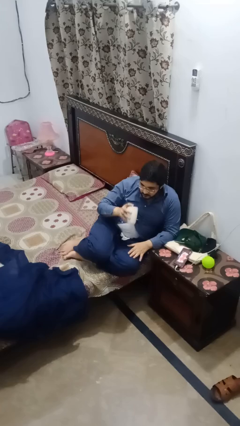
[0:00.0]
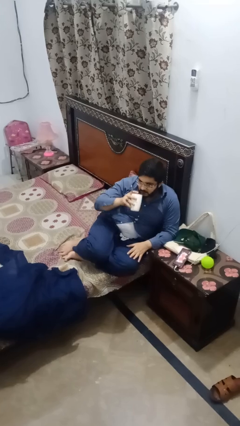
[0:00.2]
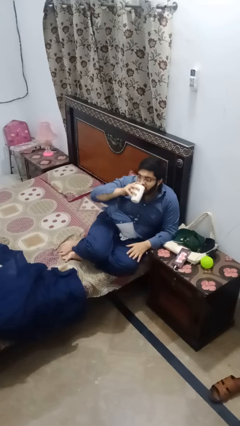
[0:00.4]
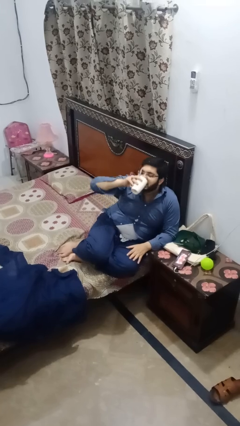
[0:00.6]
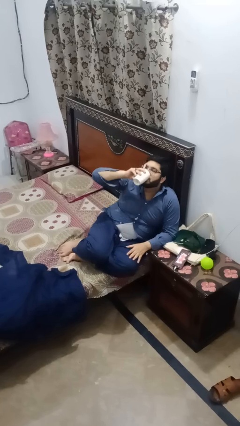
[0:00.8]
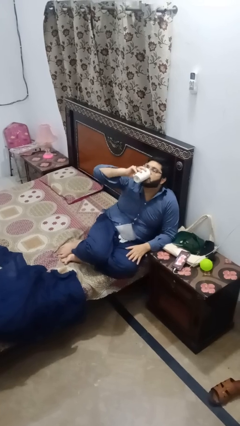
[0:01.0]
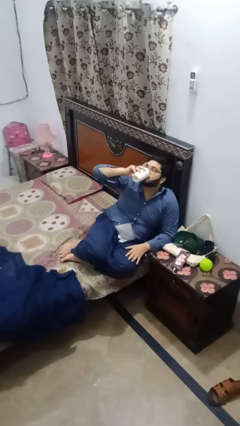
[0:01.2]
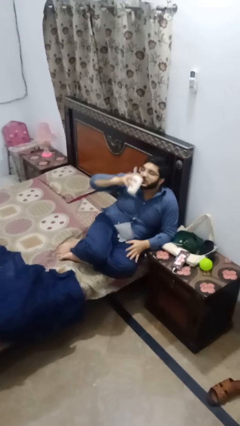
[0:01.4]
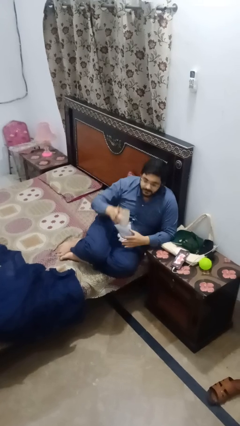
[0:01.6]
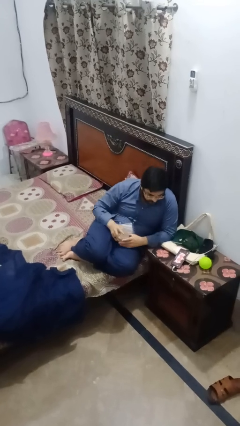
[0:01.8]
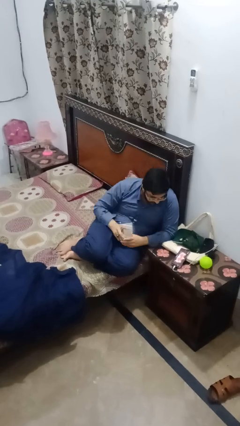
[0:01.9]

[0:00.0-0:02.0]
person drinks from mug

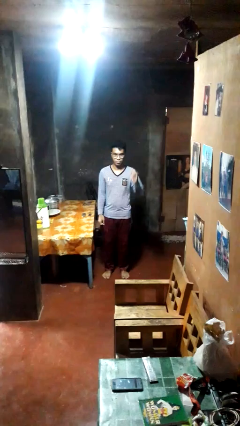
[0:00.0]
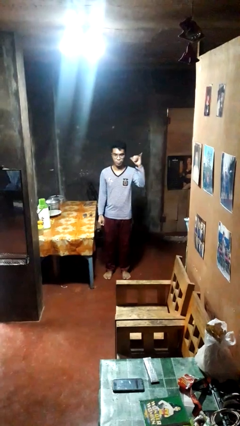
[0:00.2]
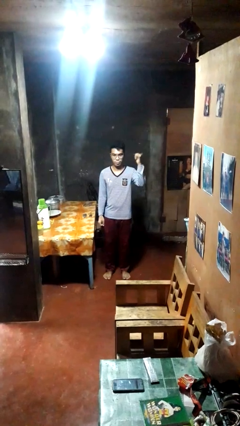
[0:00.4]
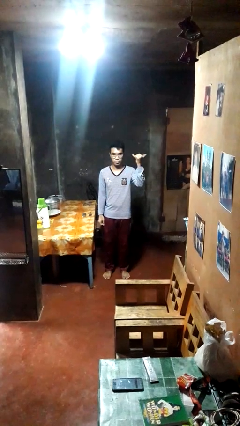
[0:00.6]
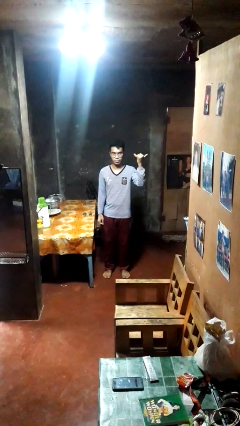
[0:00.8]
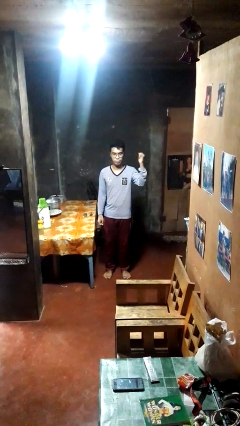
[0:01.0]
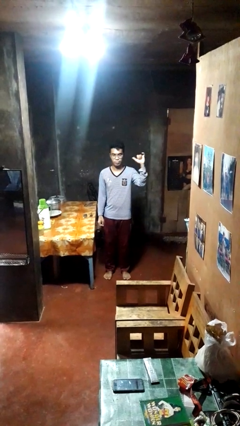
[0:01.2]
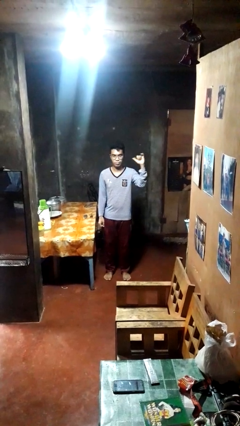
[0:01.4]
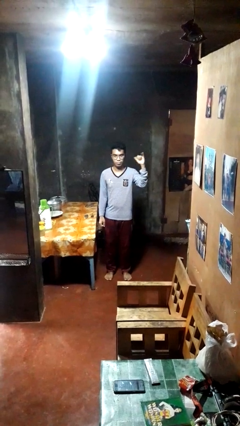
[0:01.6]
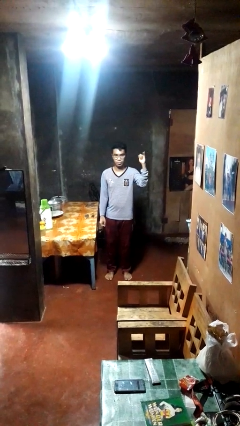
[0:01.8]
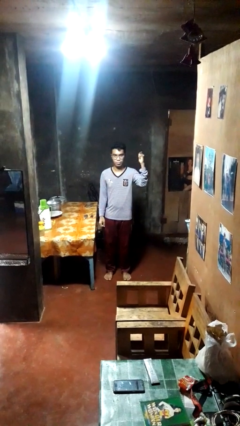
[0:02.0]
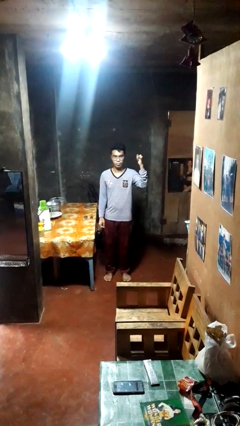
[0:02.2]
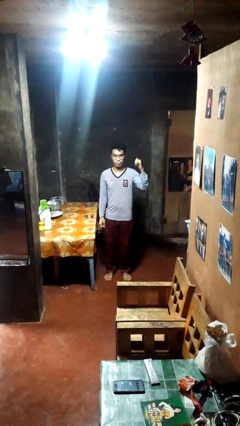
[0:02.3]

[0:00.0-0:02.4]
person gestures hang loose

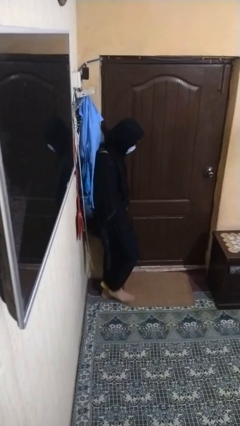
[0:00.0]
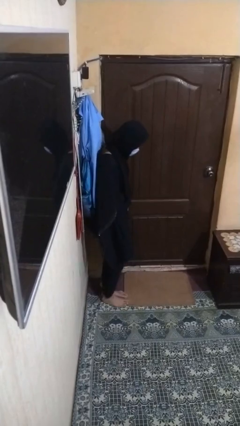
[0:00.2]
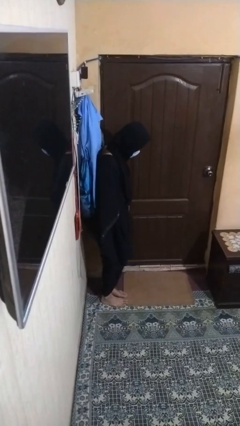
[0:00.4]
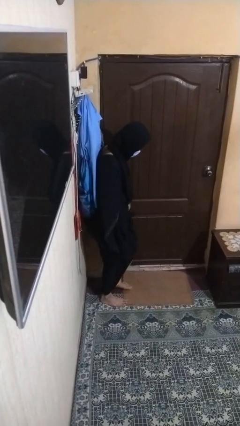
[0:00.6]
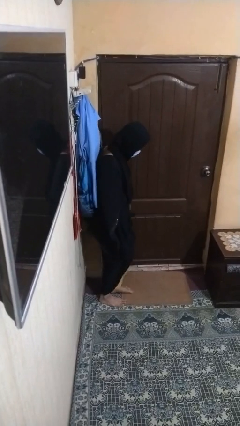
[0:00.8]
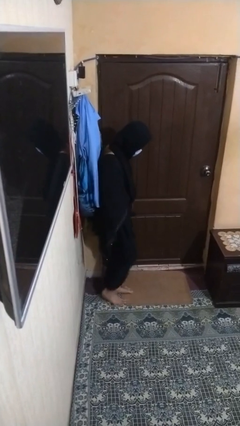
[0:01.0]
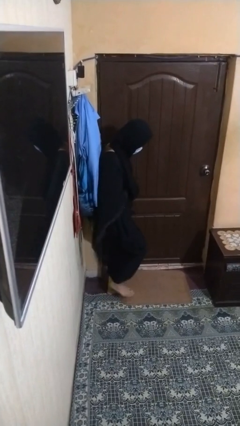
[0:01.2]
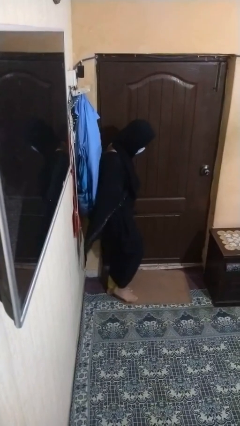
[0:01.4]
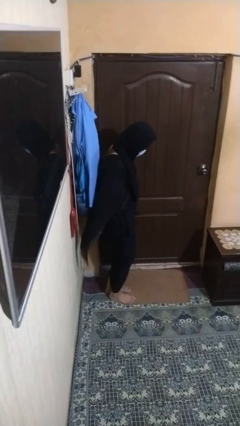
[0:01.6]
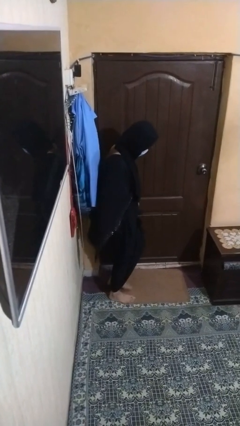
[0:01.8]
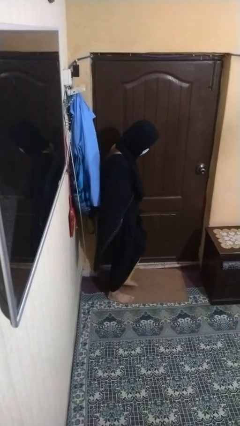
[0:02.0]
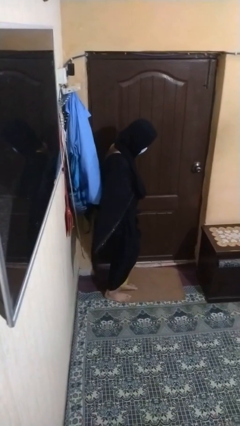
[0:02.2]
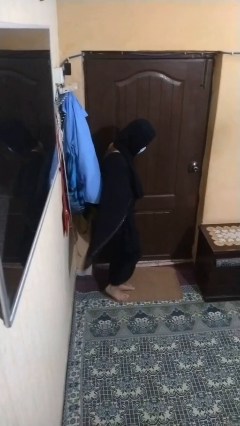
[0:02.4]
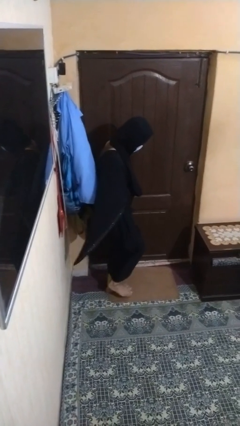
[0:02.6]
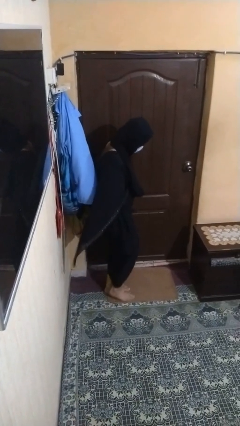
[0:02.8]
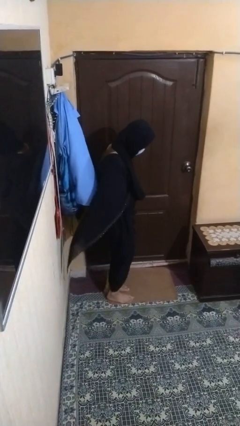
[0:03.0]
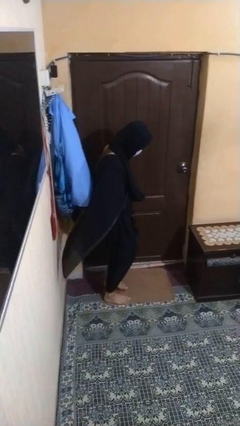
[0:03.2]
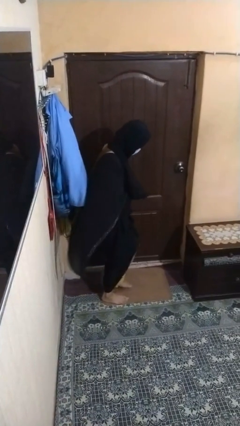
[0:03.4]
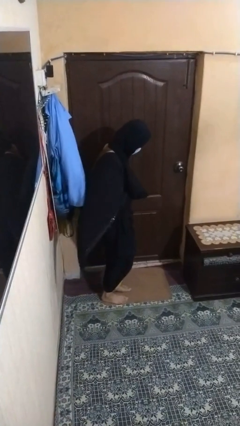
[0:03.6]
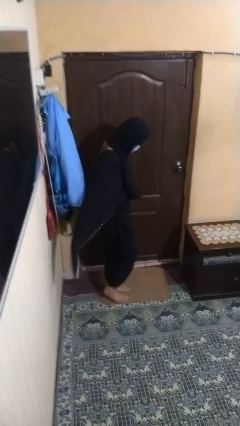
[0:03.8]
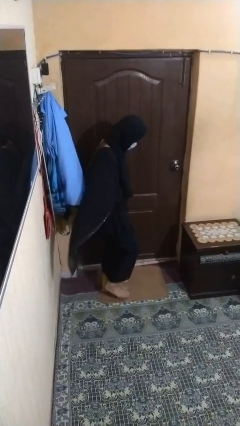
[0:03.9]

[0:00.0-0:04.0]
person walks tiptoe

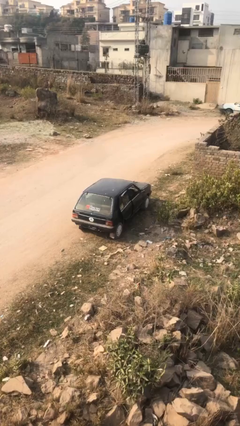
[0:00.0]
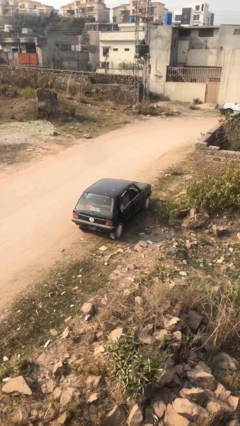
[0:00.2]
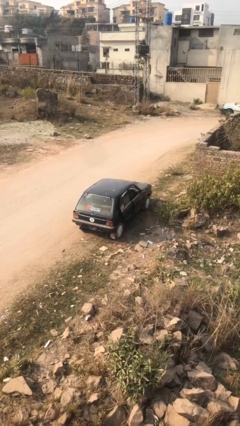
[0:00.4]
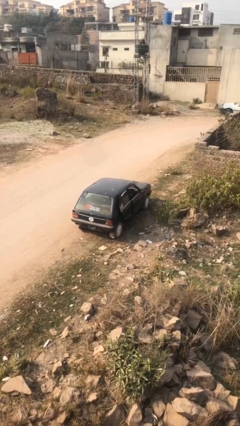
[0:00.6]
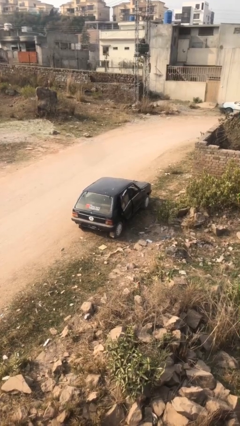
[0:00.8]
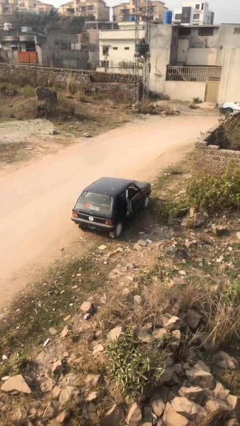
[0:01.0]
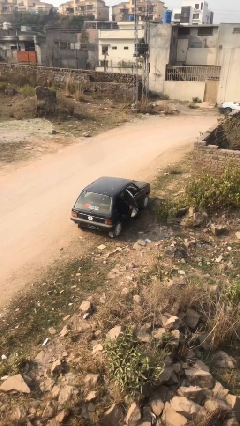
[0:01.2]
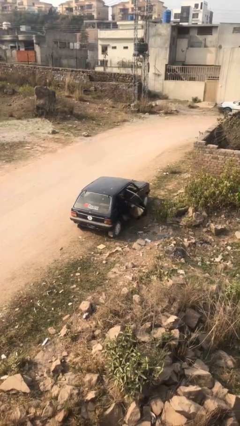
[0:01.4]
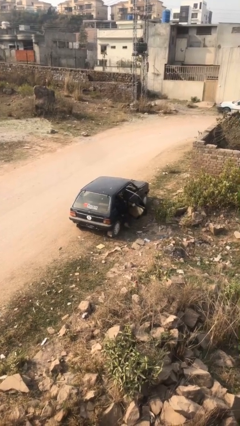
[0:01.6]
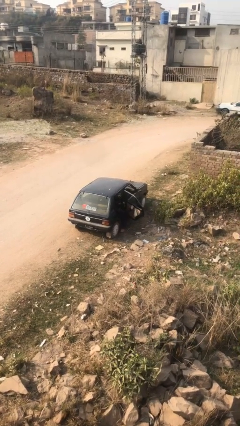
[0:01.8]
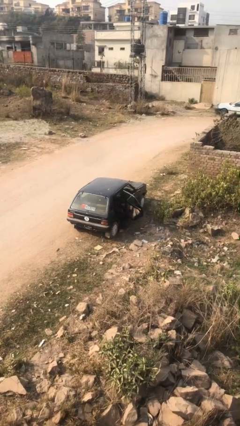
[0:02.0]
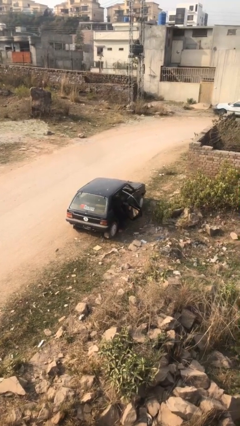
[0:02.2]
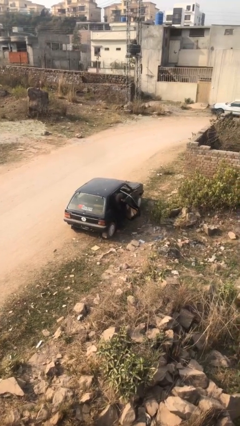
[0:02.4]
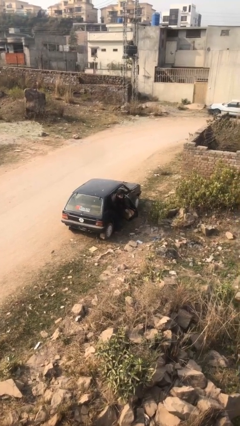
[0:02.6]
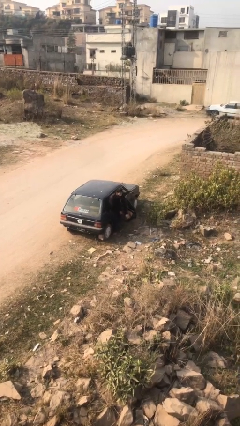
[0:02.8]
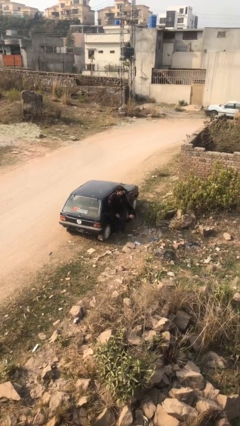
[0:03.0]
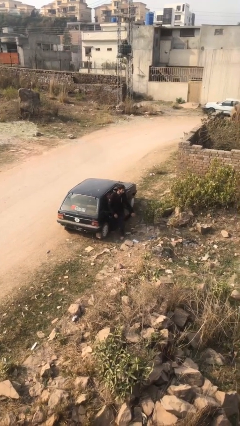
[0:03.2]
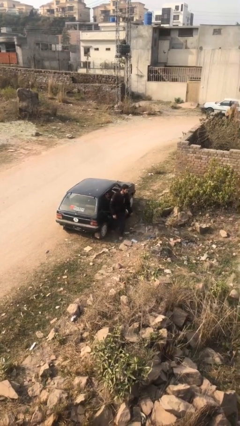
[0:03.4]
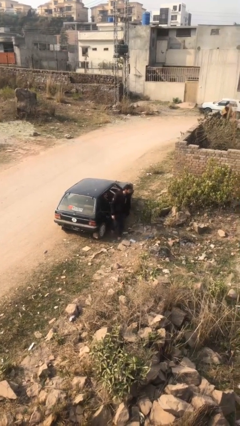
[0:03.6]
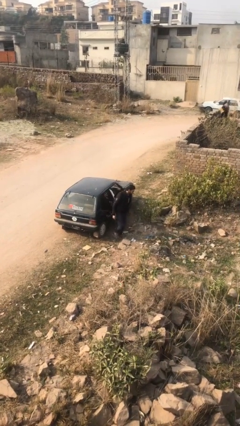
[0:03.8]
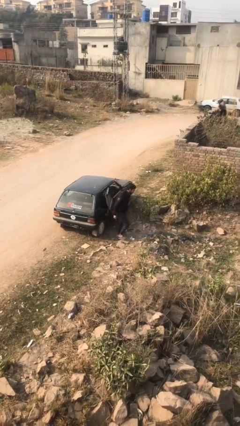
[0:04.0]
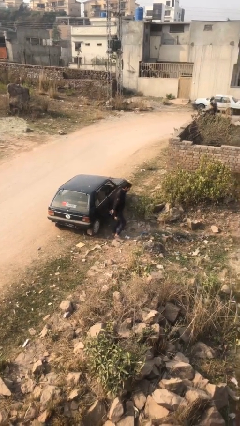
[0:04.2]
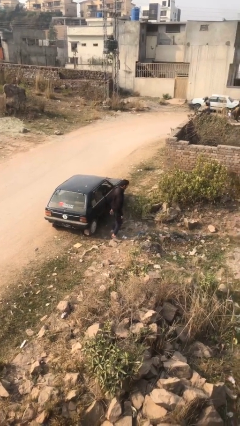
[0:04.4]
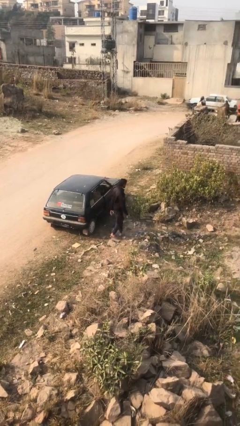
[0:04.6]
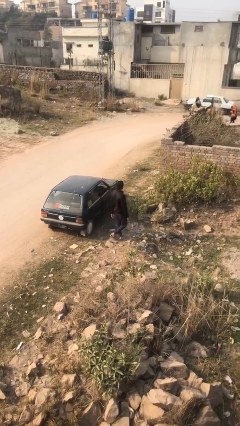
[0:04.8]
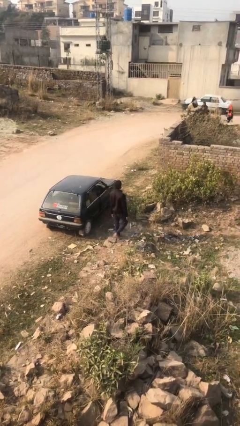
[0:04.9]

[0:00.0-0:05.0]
car drops off person

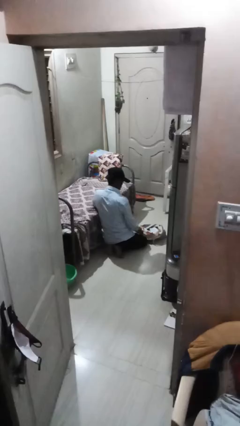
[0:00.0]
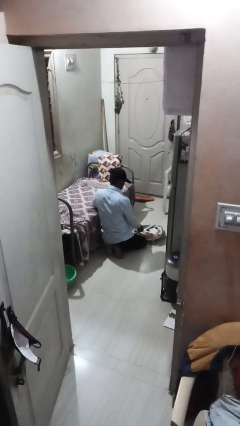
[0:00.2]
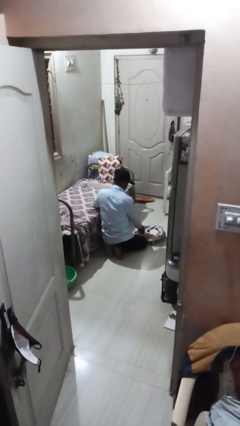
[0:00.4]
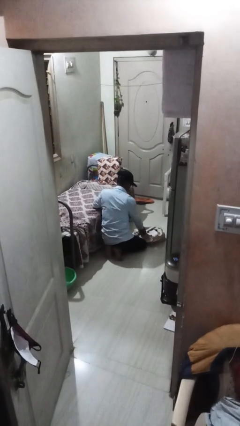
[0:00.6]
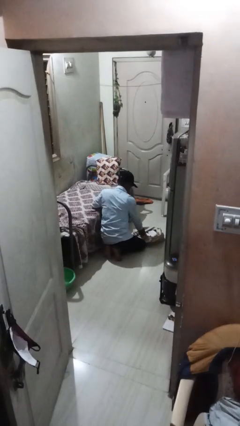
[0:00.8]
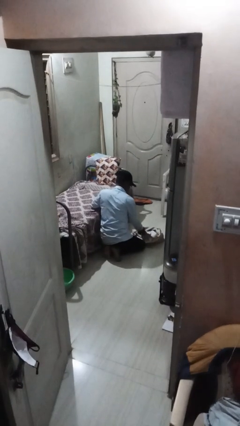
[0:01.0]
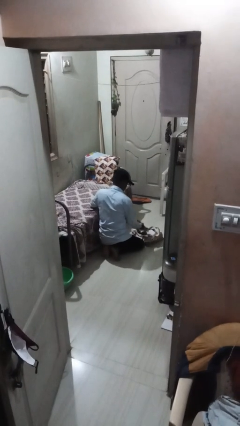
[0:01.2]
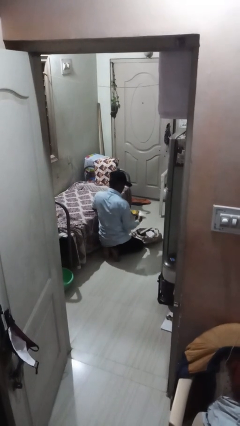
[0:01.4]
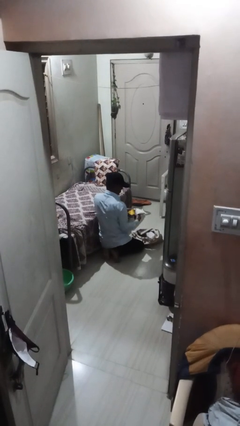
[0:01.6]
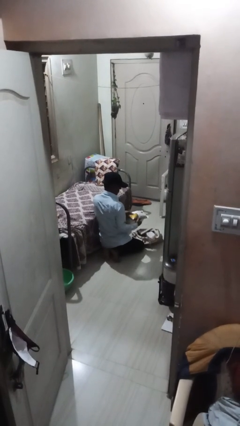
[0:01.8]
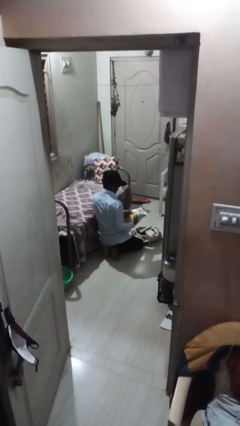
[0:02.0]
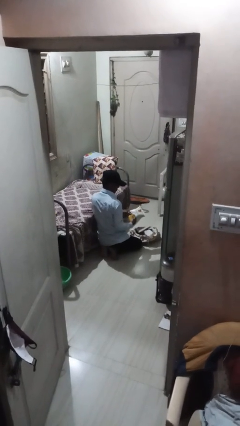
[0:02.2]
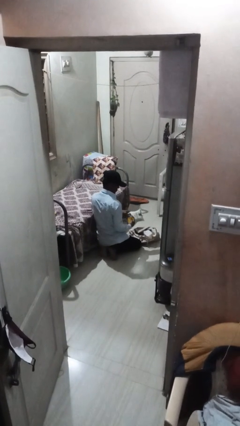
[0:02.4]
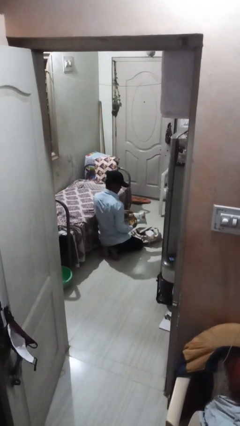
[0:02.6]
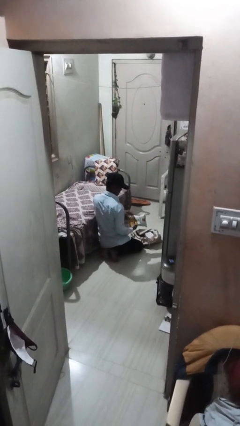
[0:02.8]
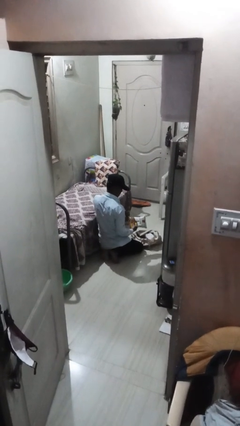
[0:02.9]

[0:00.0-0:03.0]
person takes object from bag

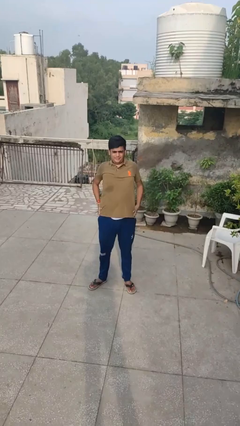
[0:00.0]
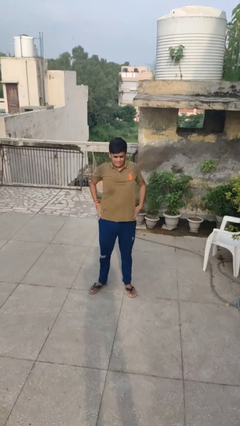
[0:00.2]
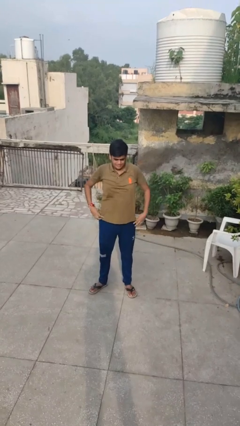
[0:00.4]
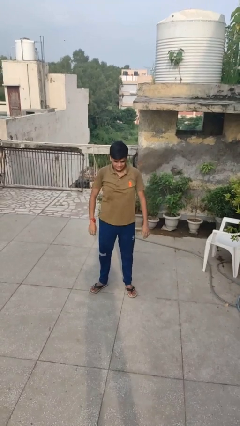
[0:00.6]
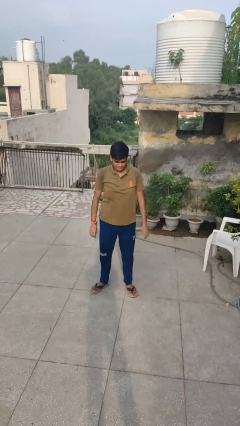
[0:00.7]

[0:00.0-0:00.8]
person stretches back

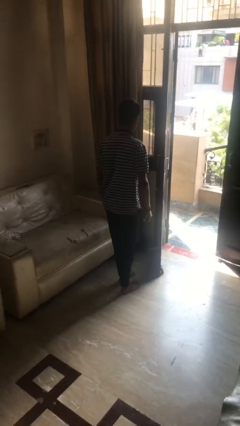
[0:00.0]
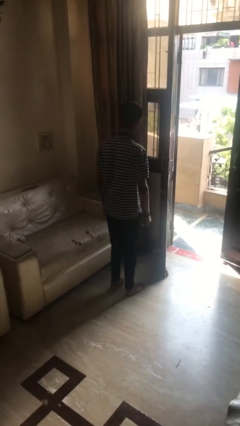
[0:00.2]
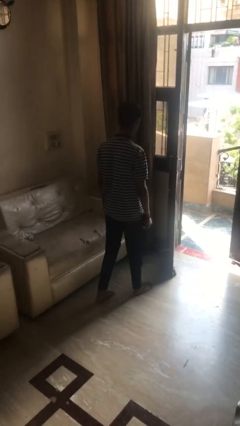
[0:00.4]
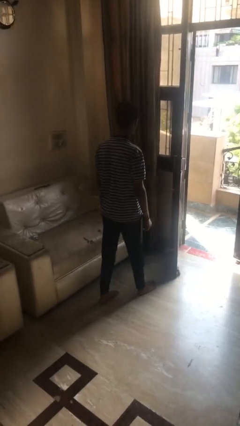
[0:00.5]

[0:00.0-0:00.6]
person stubs toe
